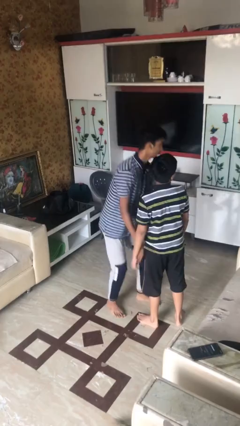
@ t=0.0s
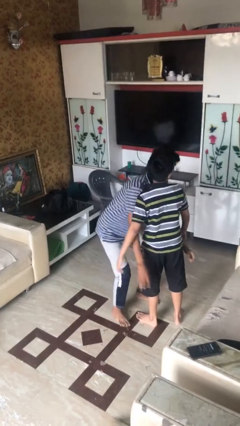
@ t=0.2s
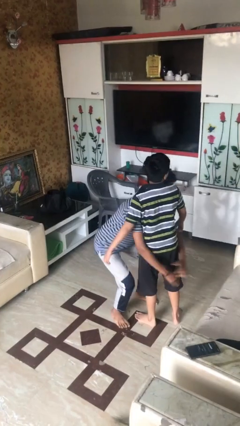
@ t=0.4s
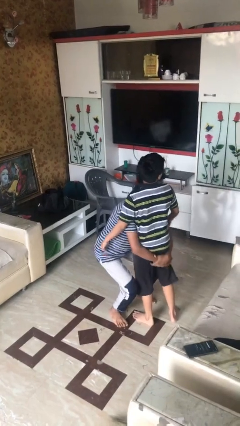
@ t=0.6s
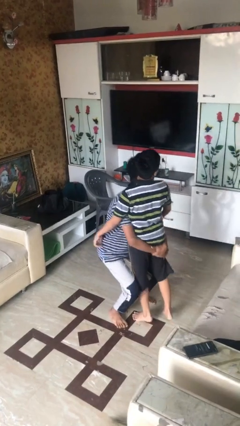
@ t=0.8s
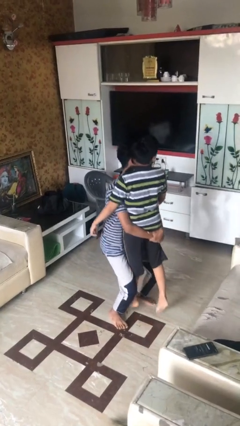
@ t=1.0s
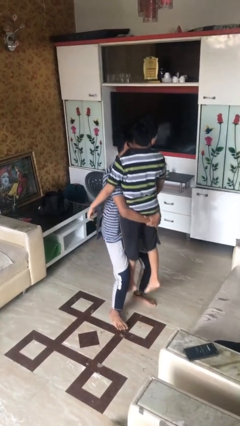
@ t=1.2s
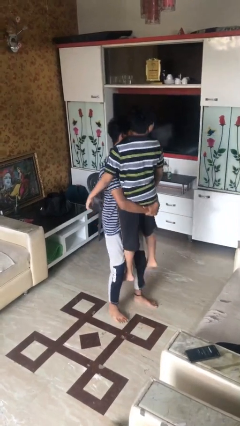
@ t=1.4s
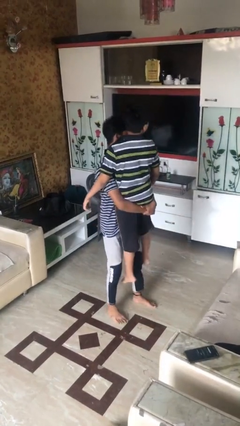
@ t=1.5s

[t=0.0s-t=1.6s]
person picks up person

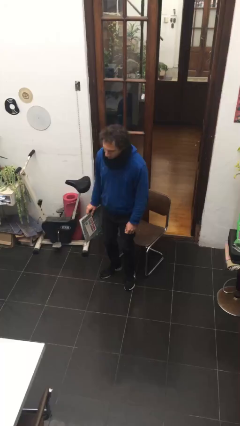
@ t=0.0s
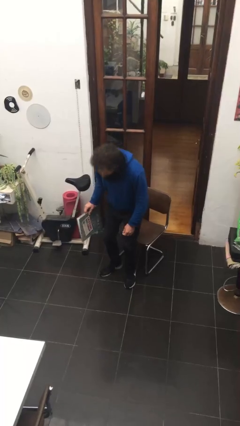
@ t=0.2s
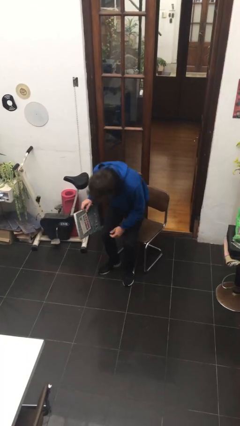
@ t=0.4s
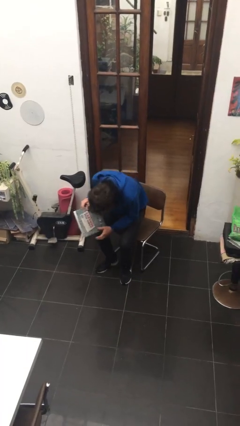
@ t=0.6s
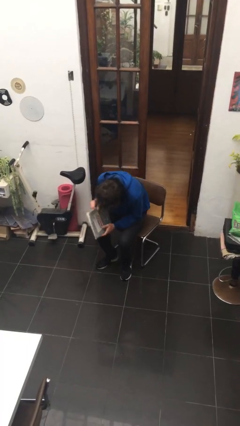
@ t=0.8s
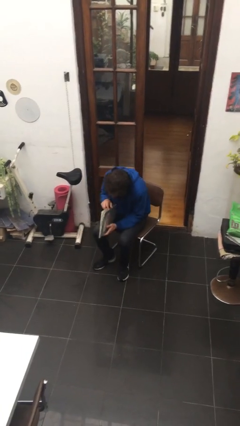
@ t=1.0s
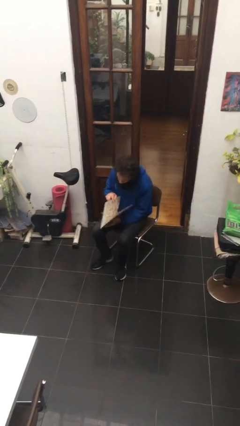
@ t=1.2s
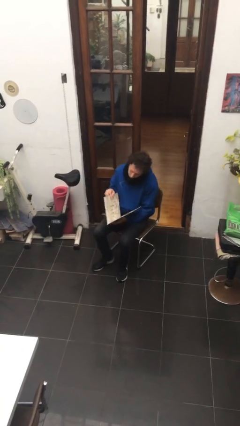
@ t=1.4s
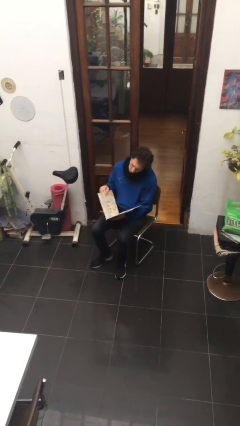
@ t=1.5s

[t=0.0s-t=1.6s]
person sits down

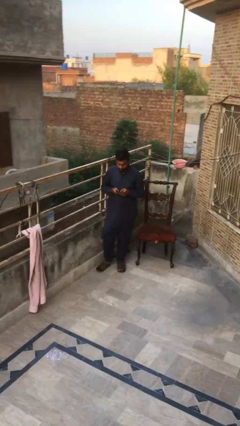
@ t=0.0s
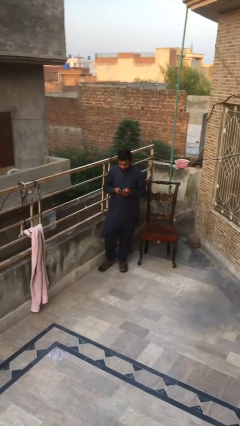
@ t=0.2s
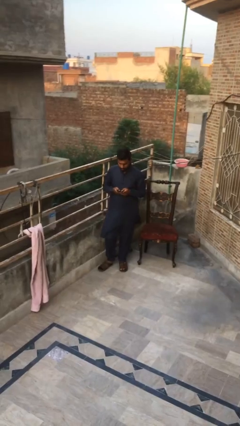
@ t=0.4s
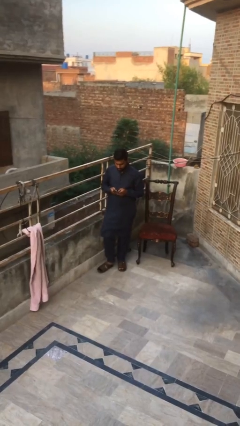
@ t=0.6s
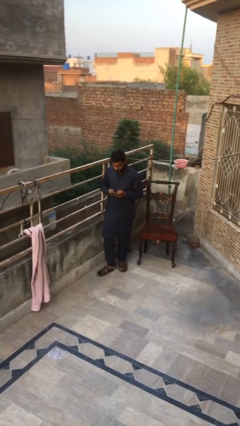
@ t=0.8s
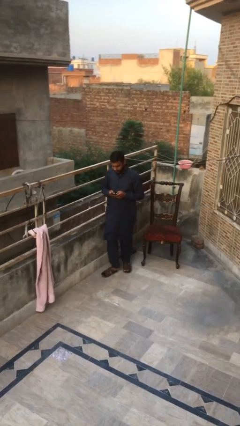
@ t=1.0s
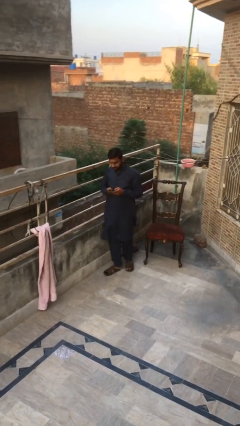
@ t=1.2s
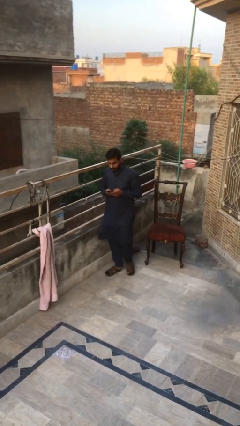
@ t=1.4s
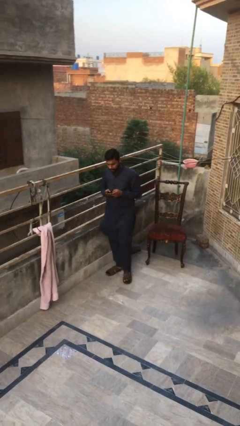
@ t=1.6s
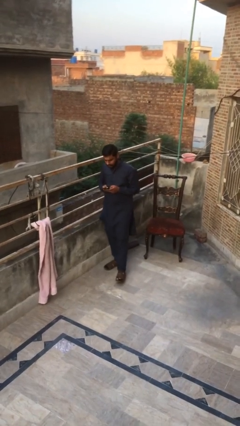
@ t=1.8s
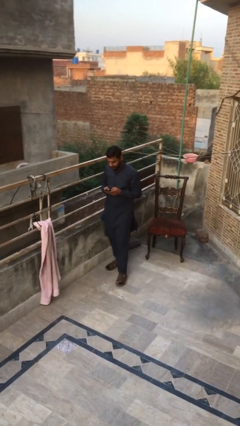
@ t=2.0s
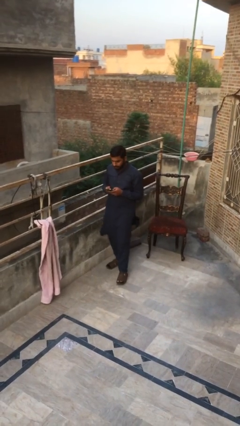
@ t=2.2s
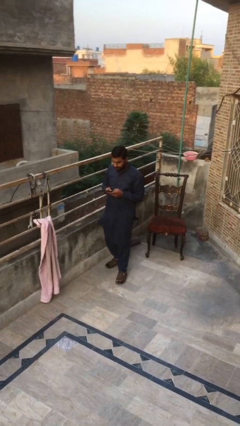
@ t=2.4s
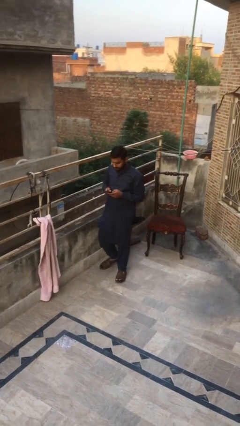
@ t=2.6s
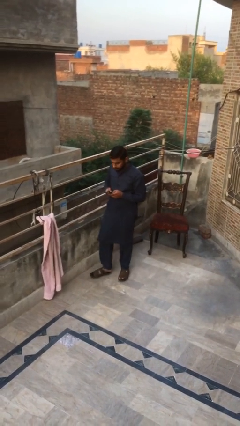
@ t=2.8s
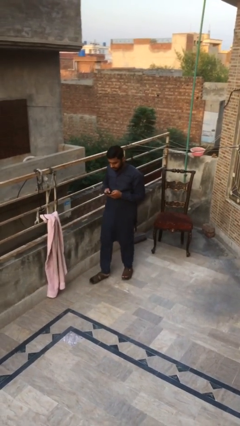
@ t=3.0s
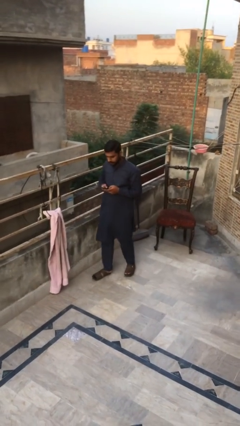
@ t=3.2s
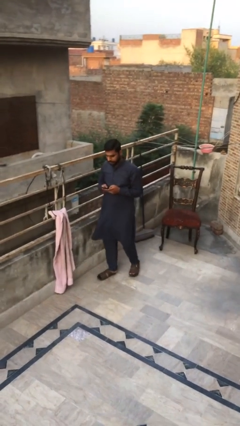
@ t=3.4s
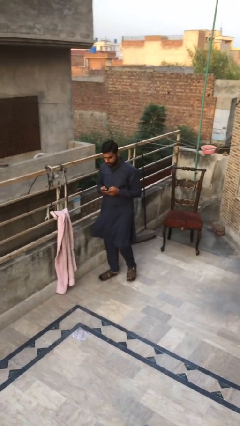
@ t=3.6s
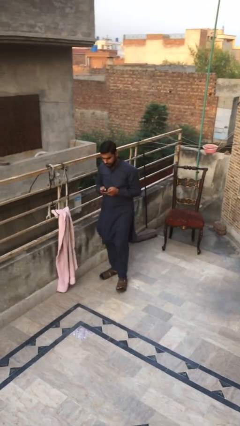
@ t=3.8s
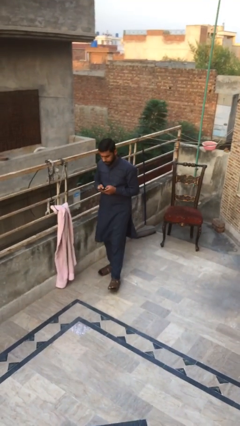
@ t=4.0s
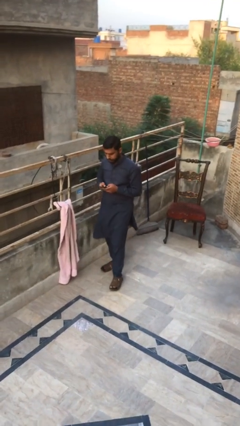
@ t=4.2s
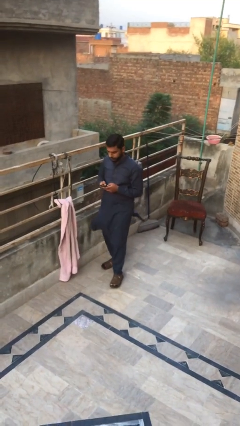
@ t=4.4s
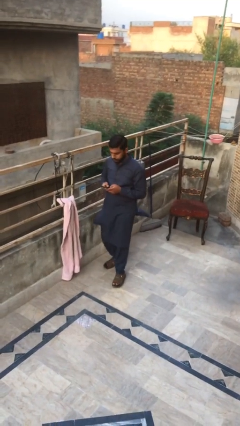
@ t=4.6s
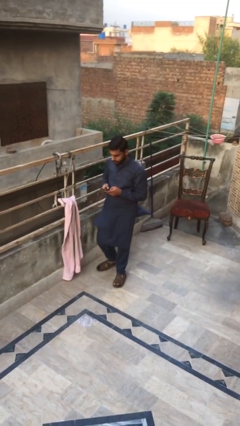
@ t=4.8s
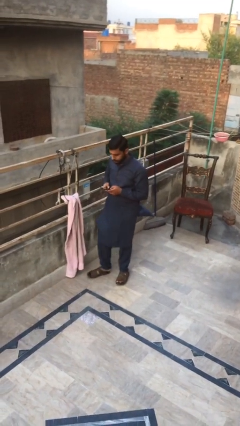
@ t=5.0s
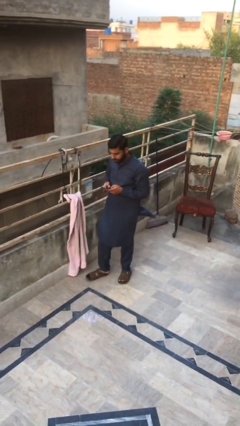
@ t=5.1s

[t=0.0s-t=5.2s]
person texts on phone

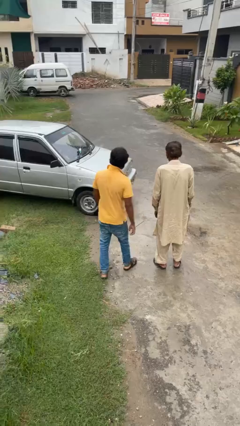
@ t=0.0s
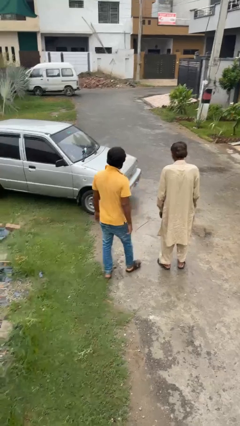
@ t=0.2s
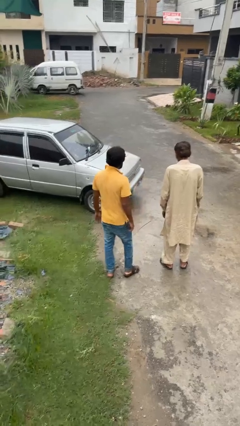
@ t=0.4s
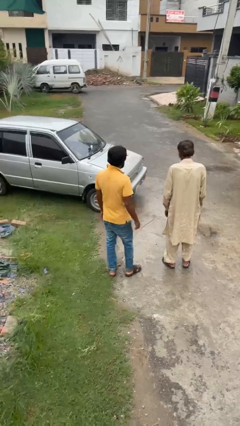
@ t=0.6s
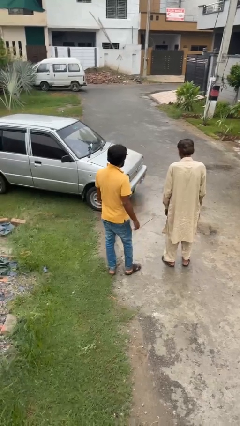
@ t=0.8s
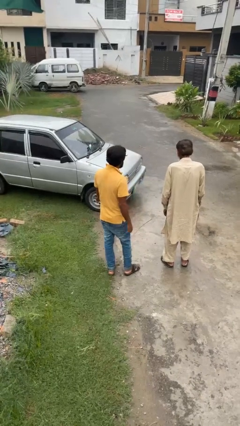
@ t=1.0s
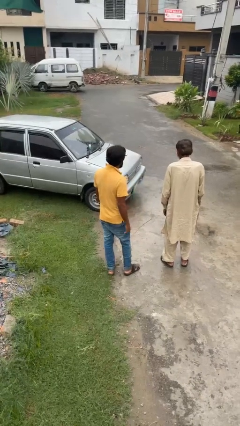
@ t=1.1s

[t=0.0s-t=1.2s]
person nudges person with elbow

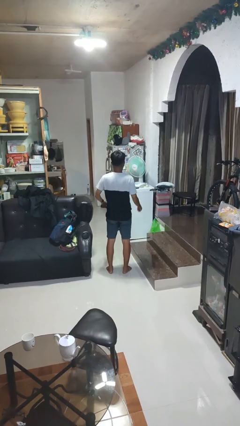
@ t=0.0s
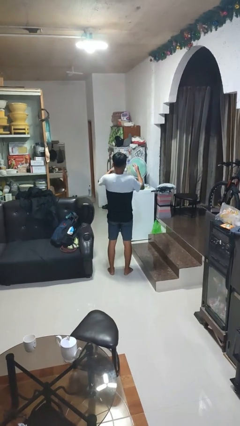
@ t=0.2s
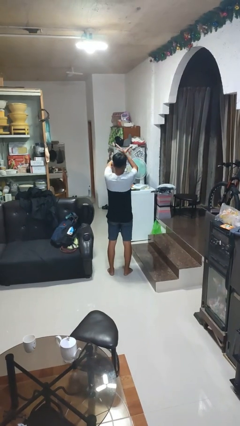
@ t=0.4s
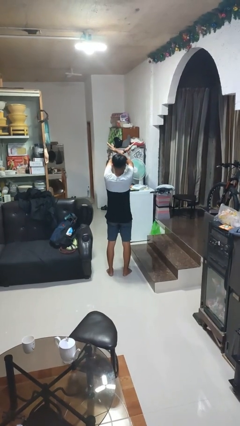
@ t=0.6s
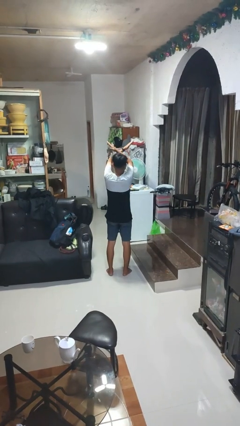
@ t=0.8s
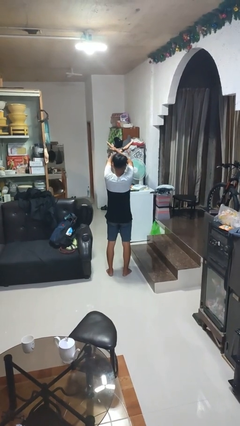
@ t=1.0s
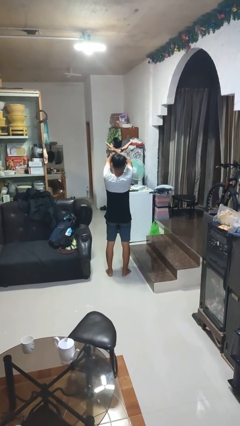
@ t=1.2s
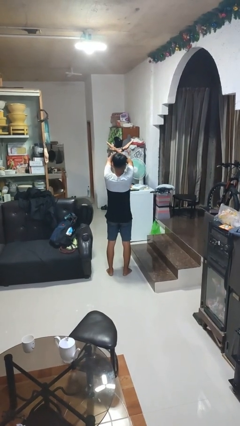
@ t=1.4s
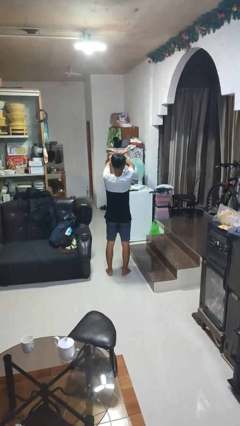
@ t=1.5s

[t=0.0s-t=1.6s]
person gestures arms x

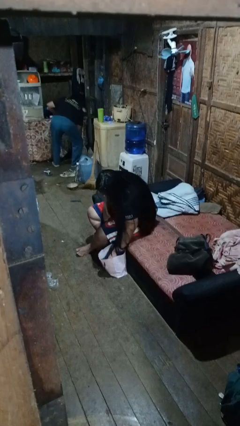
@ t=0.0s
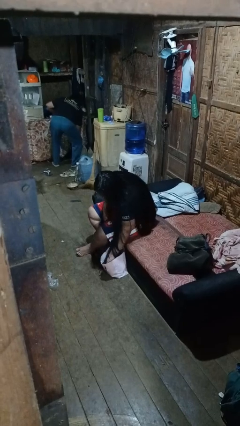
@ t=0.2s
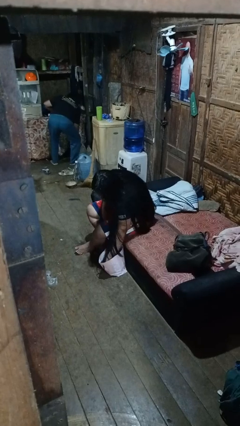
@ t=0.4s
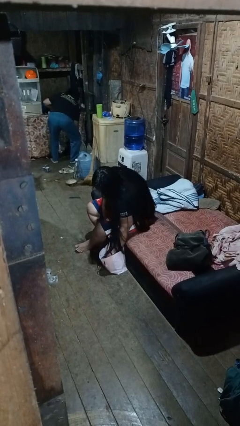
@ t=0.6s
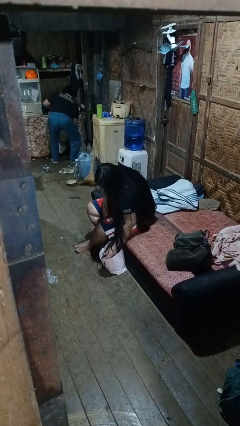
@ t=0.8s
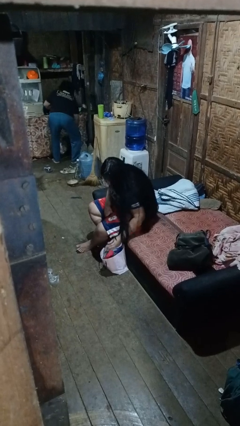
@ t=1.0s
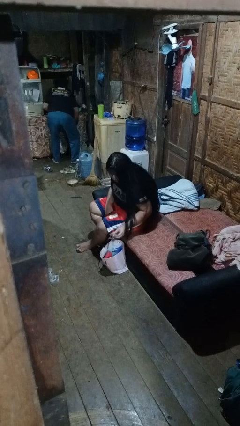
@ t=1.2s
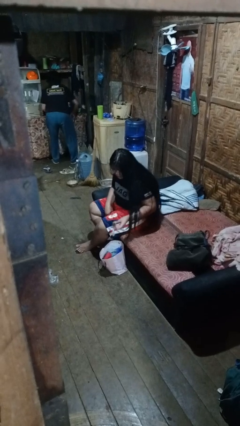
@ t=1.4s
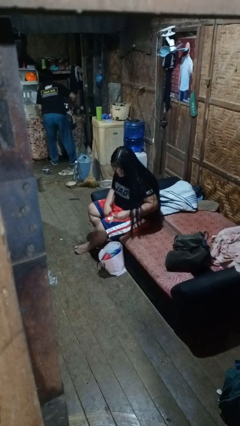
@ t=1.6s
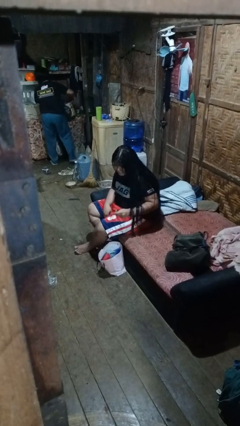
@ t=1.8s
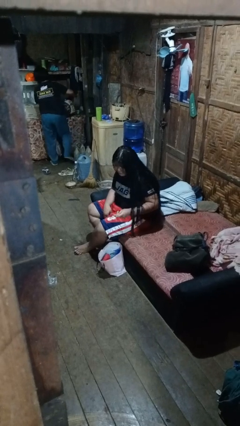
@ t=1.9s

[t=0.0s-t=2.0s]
person takes object from bag

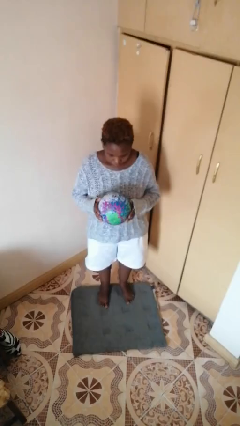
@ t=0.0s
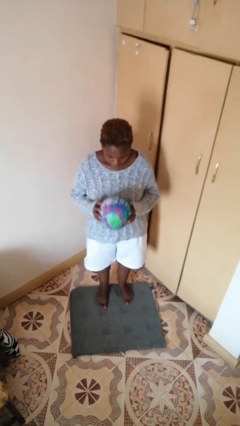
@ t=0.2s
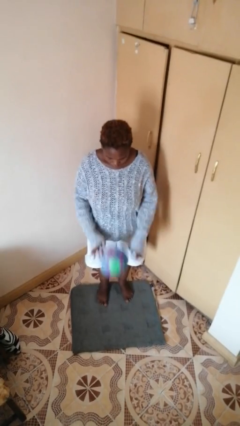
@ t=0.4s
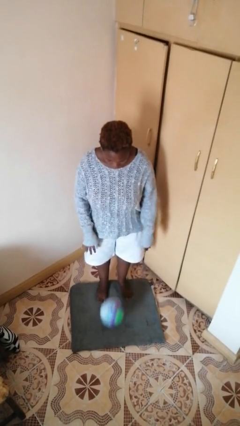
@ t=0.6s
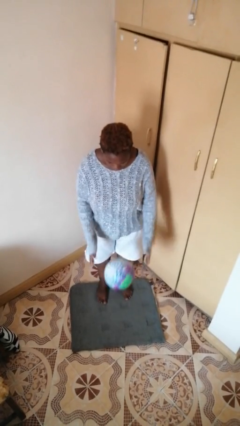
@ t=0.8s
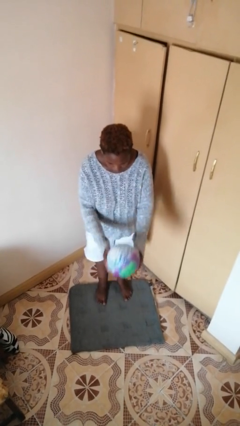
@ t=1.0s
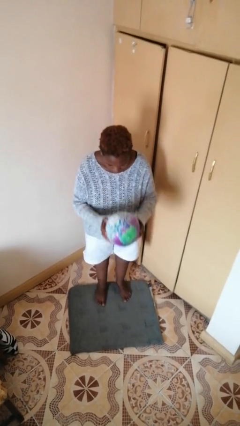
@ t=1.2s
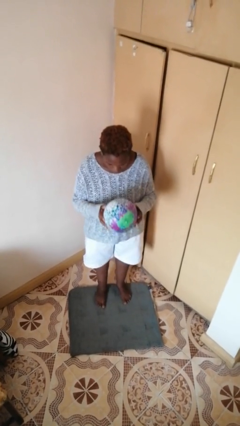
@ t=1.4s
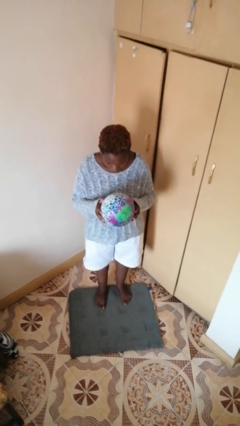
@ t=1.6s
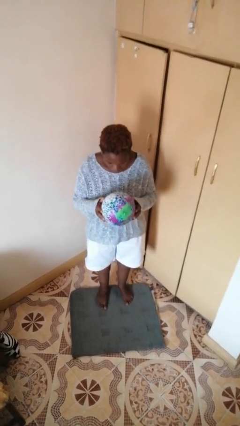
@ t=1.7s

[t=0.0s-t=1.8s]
person bounces ball on floor

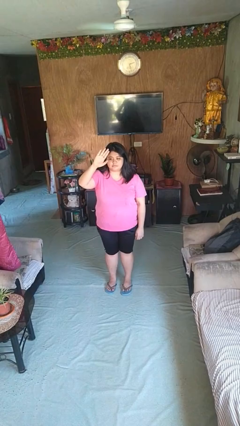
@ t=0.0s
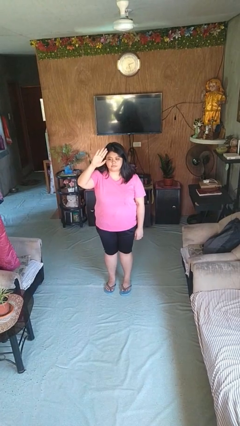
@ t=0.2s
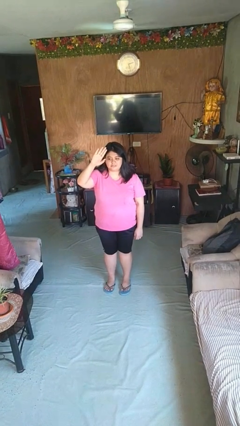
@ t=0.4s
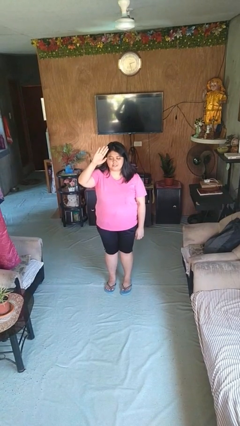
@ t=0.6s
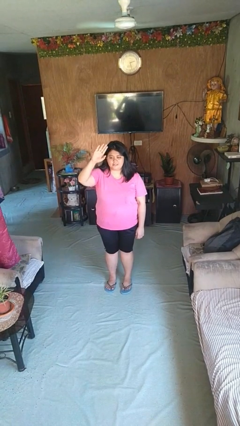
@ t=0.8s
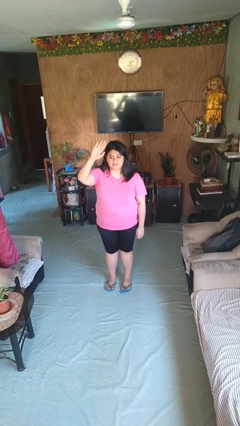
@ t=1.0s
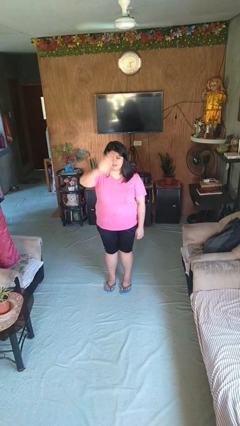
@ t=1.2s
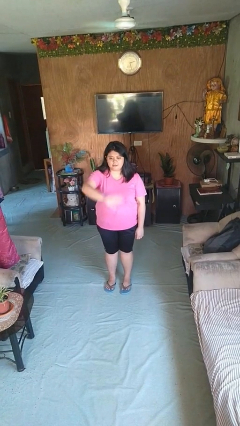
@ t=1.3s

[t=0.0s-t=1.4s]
person gestures swipe down

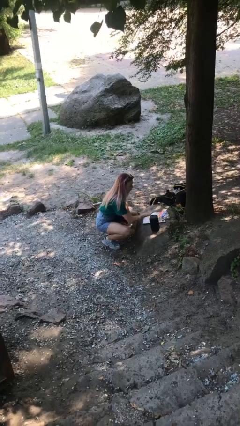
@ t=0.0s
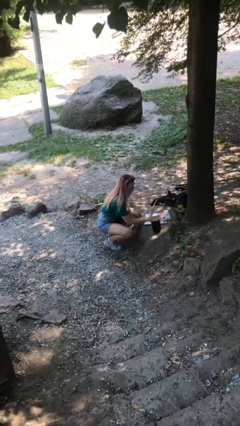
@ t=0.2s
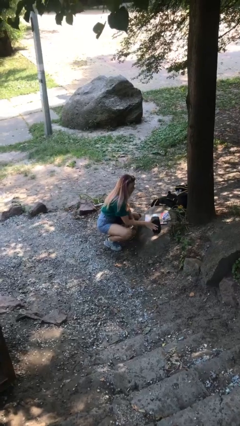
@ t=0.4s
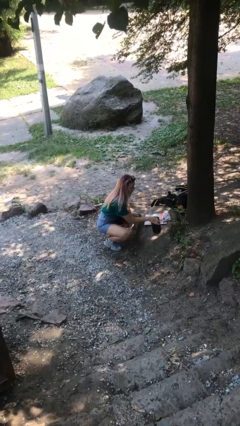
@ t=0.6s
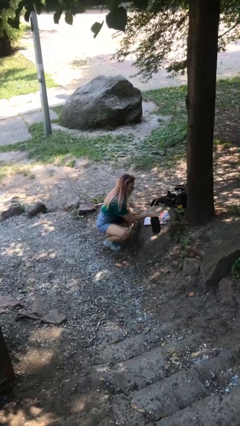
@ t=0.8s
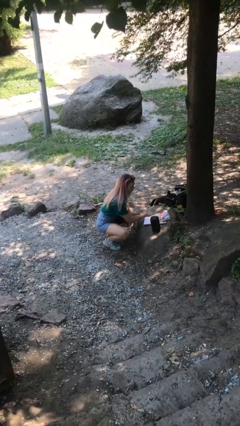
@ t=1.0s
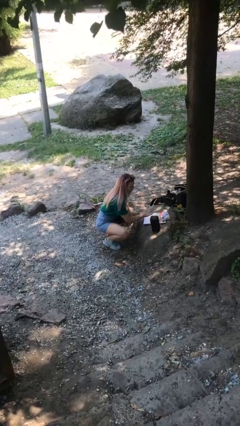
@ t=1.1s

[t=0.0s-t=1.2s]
person waves hand over object
